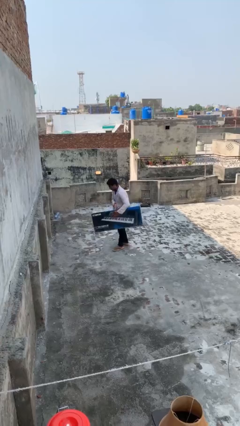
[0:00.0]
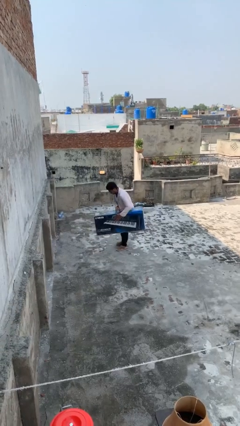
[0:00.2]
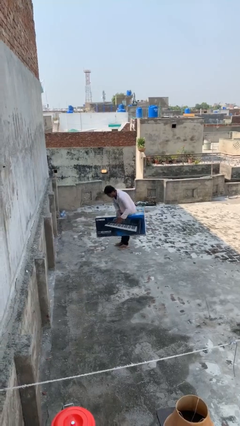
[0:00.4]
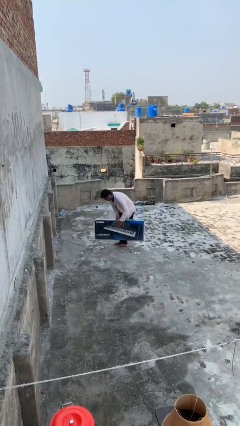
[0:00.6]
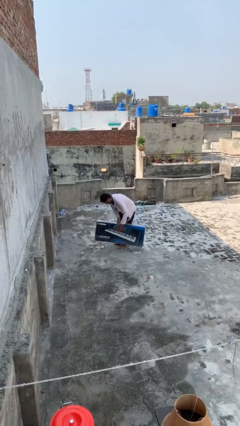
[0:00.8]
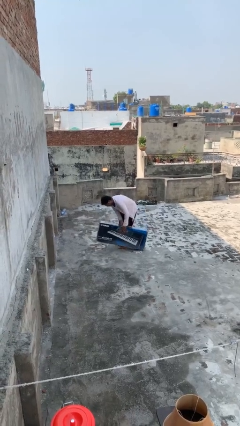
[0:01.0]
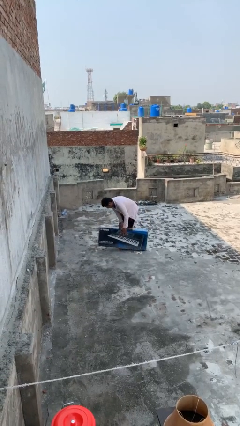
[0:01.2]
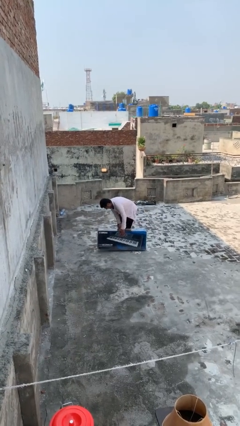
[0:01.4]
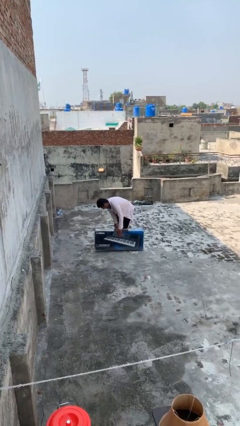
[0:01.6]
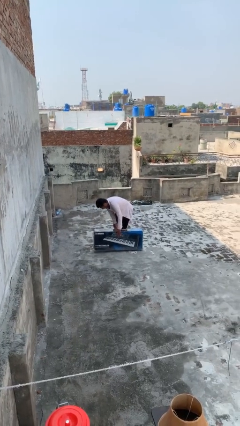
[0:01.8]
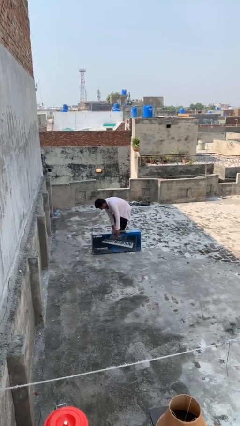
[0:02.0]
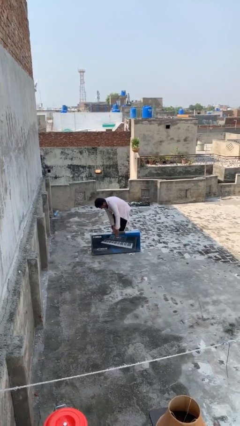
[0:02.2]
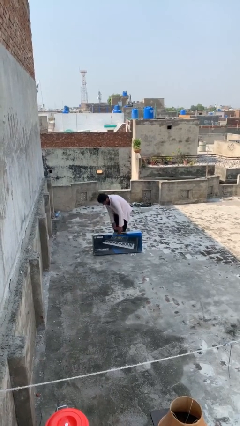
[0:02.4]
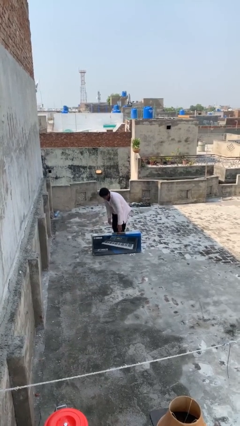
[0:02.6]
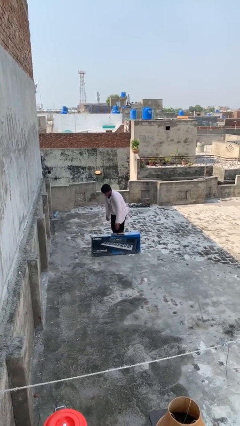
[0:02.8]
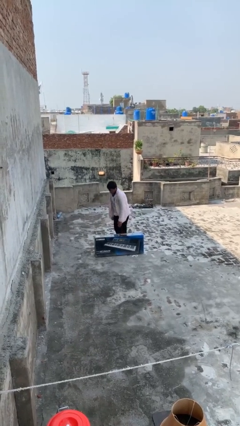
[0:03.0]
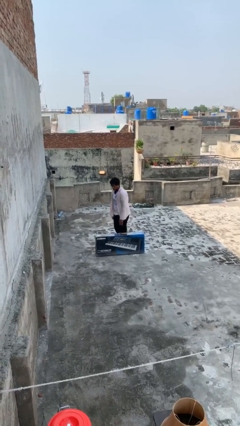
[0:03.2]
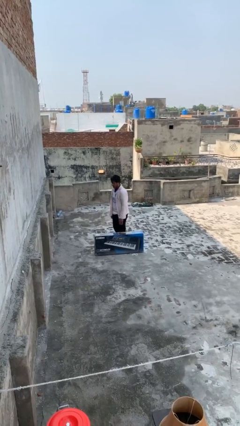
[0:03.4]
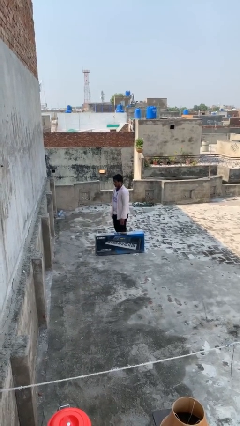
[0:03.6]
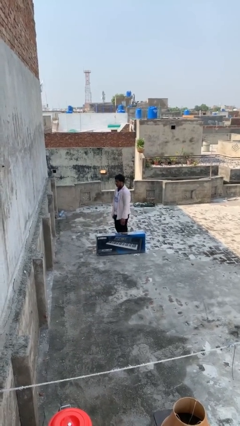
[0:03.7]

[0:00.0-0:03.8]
person puts down object on floor

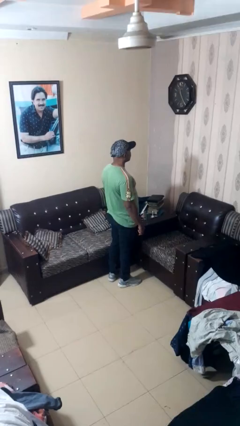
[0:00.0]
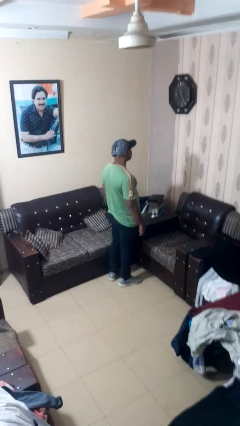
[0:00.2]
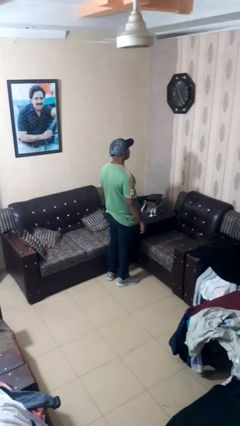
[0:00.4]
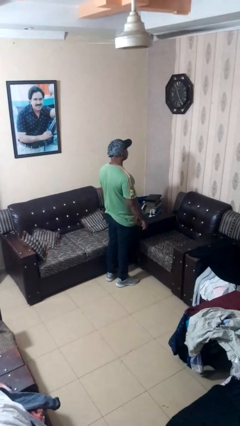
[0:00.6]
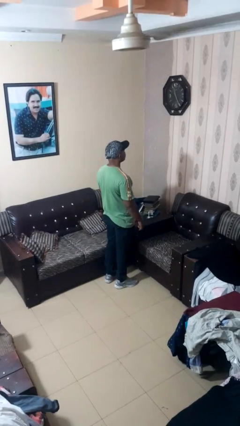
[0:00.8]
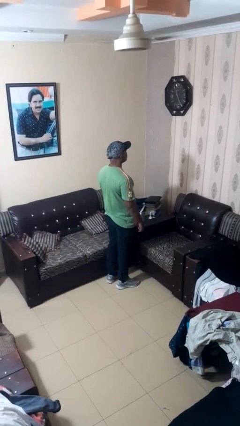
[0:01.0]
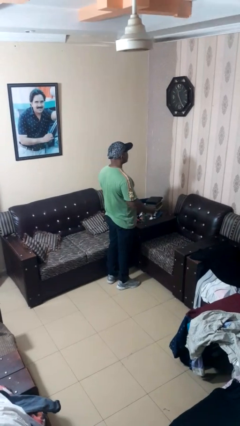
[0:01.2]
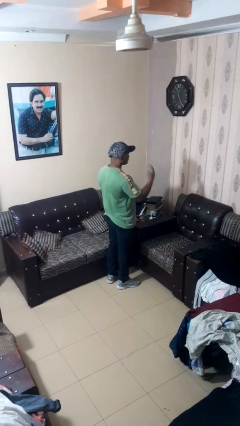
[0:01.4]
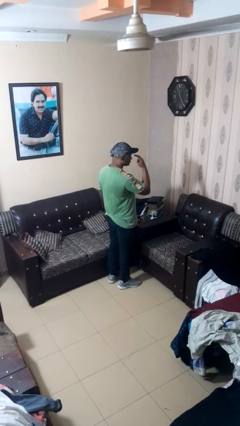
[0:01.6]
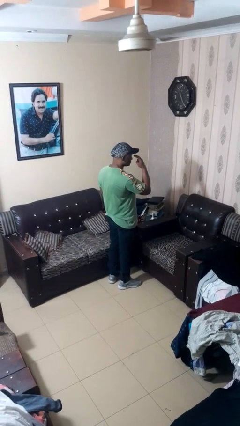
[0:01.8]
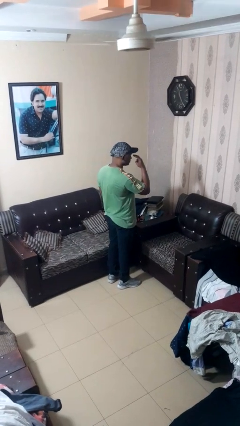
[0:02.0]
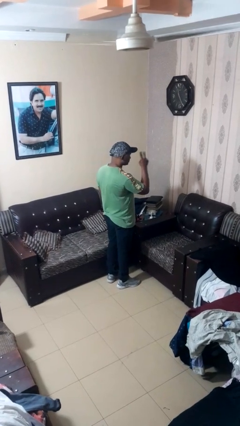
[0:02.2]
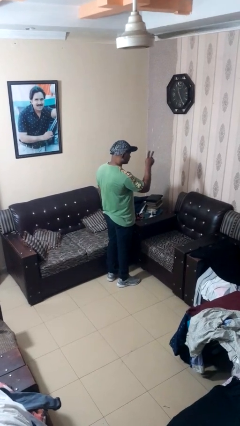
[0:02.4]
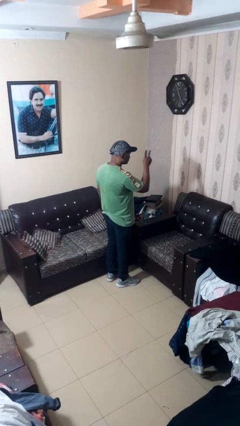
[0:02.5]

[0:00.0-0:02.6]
person gestures watch closely

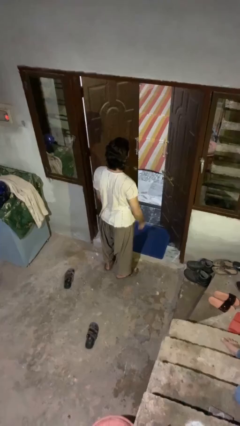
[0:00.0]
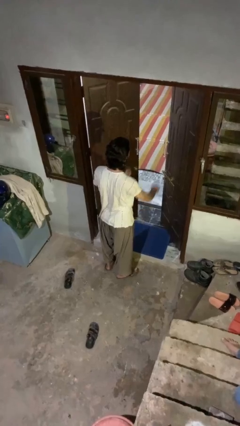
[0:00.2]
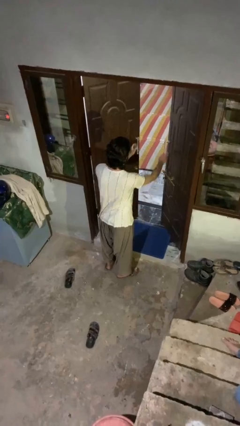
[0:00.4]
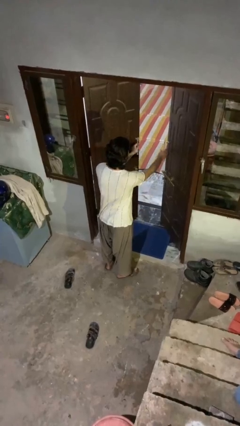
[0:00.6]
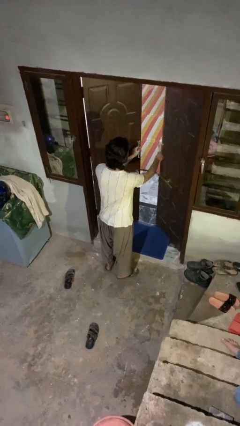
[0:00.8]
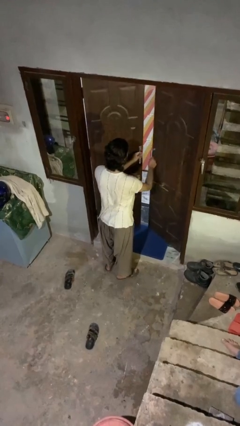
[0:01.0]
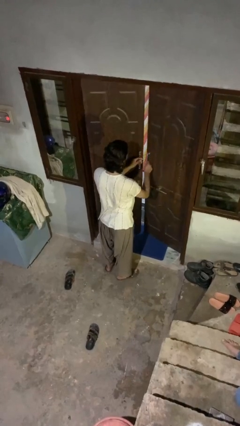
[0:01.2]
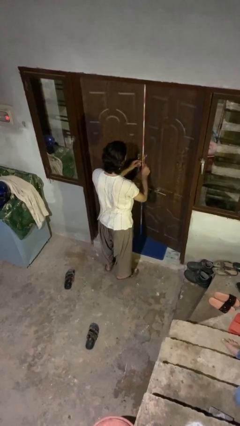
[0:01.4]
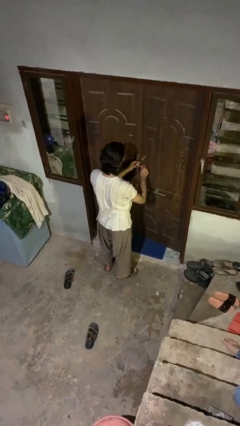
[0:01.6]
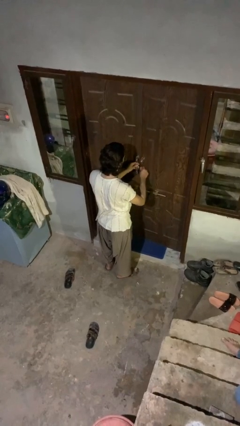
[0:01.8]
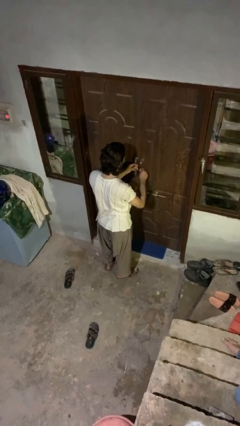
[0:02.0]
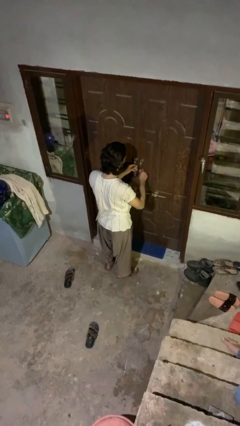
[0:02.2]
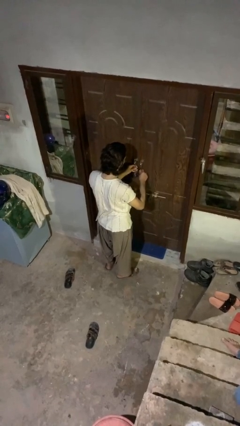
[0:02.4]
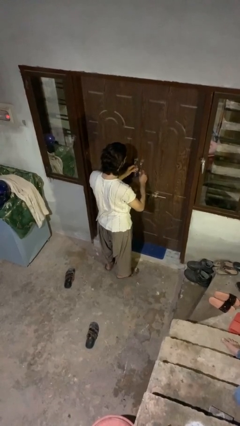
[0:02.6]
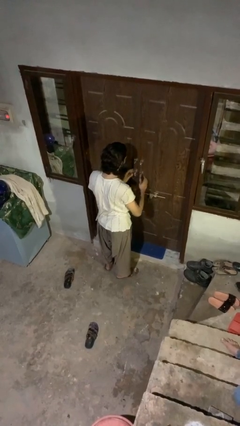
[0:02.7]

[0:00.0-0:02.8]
person closes facility door

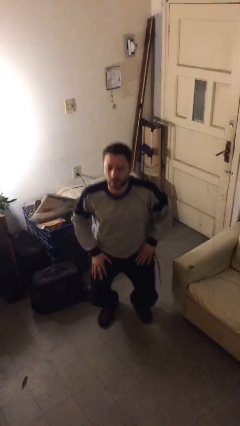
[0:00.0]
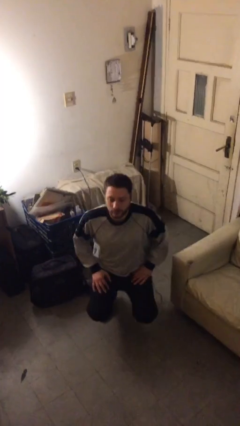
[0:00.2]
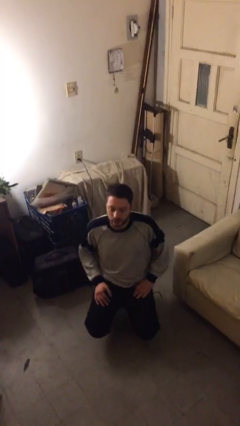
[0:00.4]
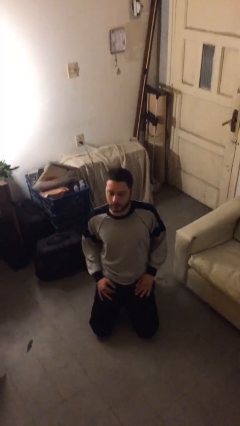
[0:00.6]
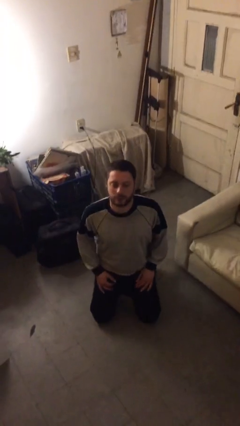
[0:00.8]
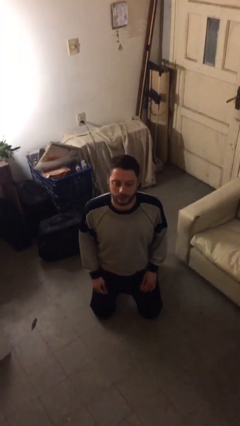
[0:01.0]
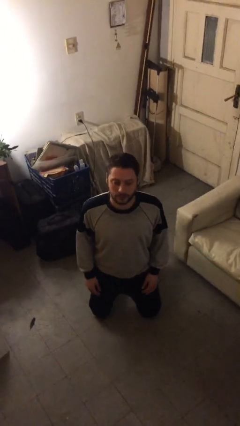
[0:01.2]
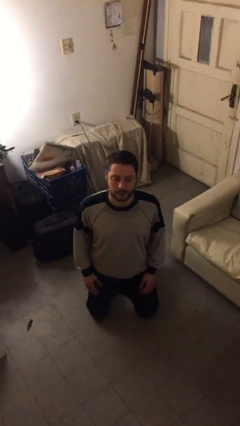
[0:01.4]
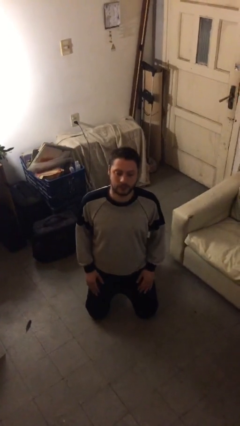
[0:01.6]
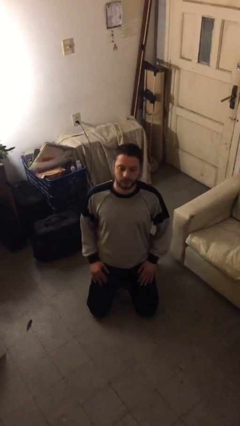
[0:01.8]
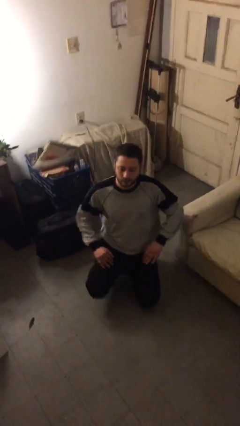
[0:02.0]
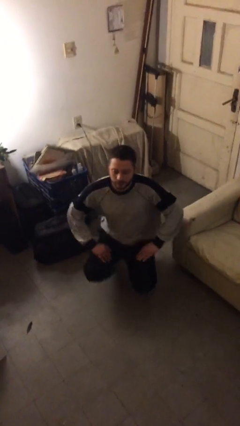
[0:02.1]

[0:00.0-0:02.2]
person kneels

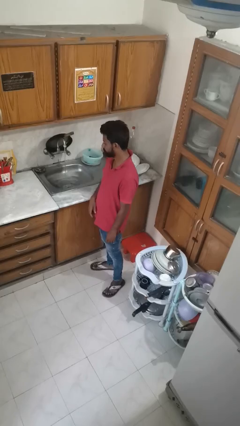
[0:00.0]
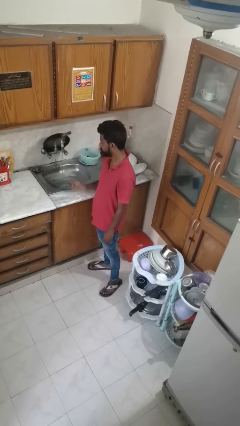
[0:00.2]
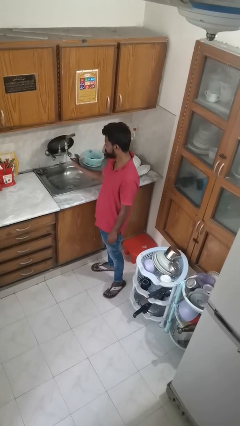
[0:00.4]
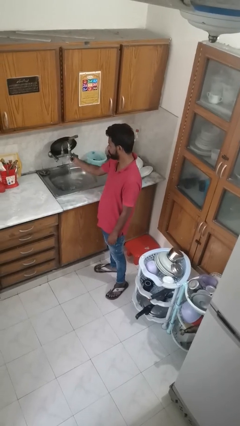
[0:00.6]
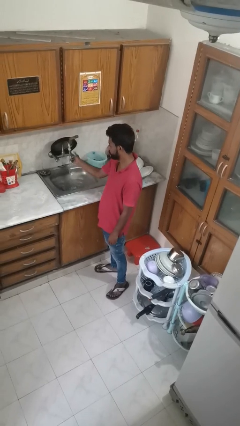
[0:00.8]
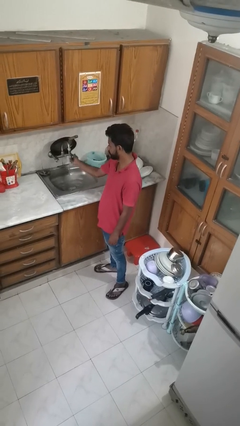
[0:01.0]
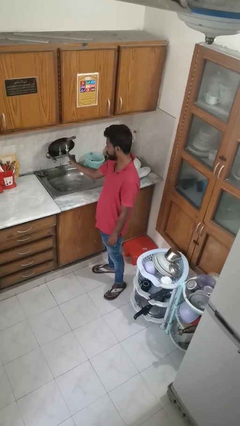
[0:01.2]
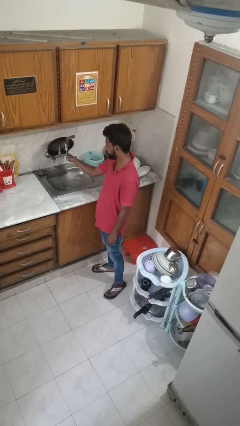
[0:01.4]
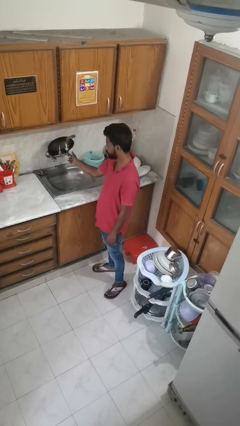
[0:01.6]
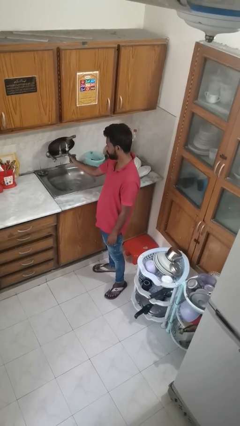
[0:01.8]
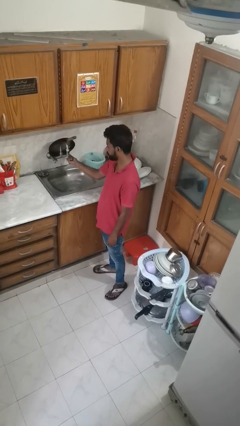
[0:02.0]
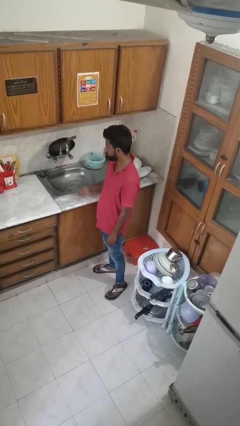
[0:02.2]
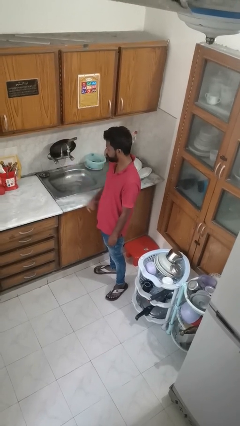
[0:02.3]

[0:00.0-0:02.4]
person turns off faucet

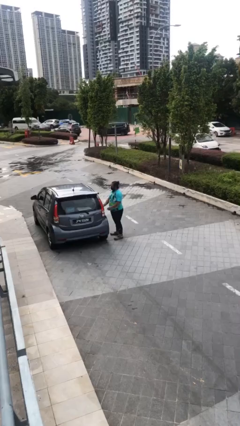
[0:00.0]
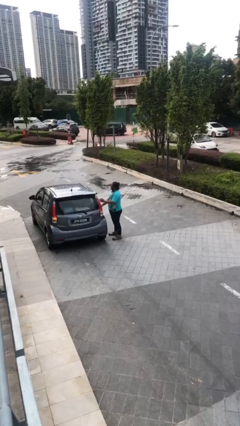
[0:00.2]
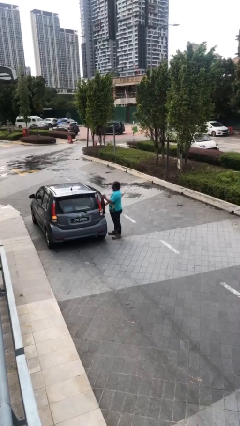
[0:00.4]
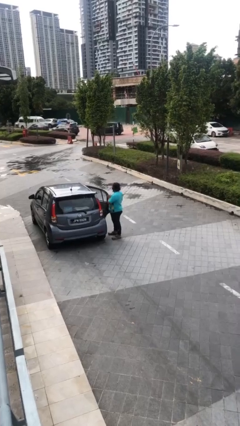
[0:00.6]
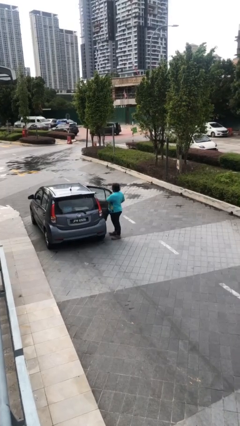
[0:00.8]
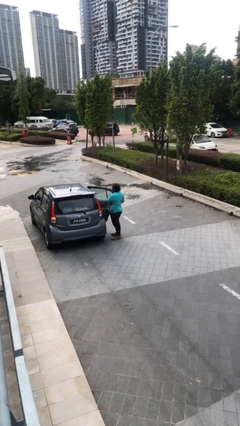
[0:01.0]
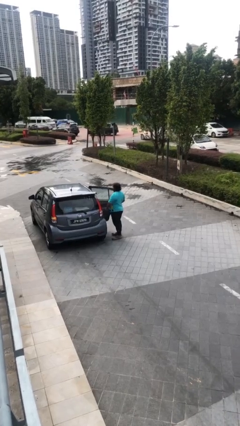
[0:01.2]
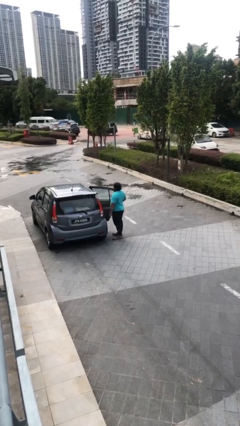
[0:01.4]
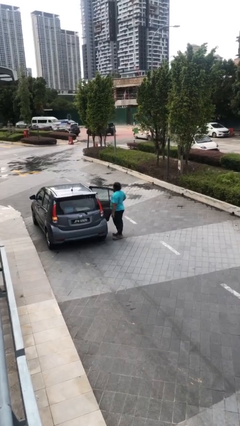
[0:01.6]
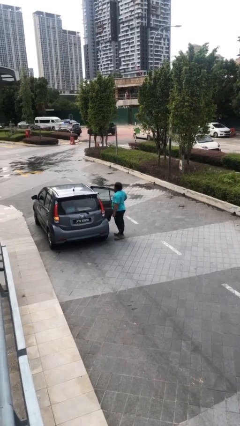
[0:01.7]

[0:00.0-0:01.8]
person opens car door

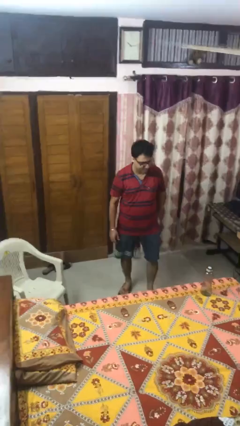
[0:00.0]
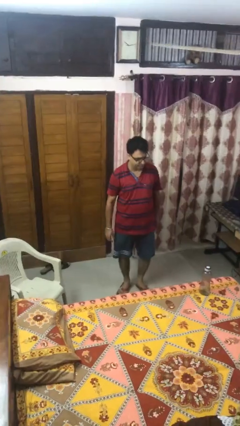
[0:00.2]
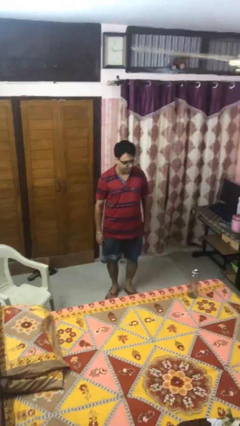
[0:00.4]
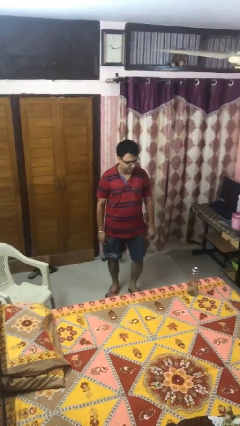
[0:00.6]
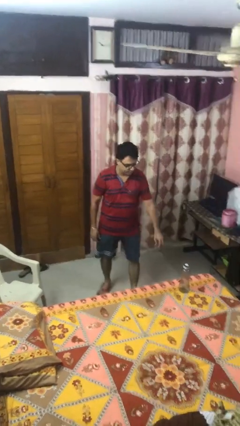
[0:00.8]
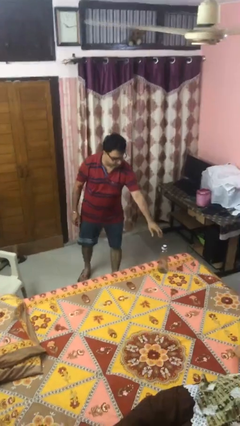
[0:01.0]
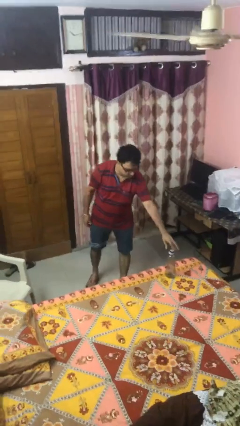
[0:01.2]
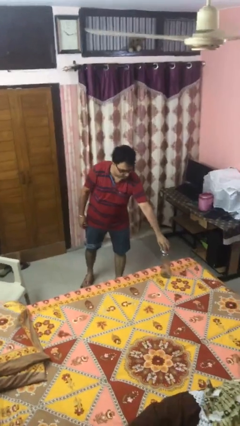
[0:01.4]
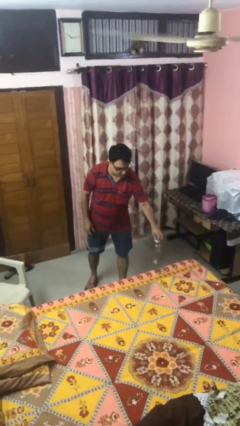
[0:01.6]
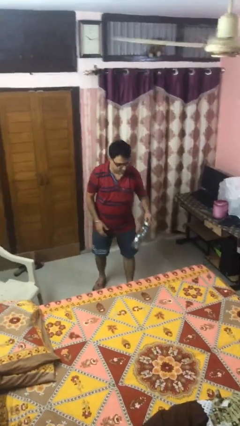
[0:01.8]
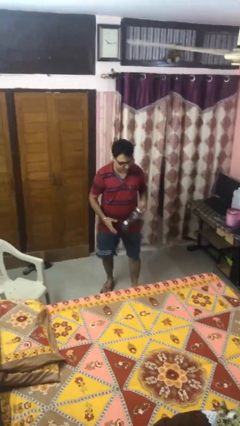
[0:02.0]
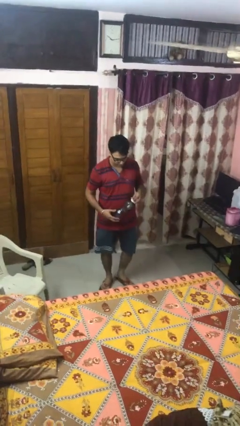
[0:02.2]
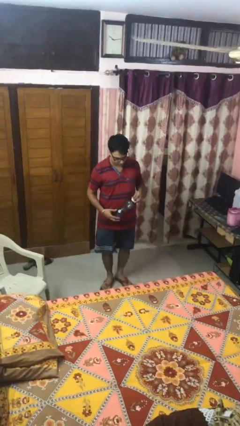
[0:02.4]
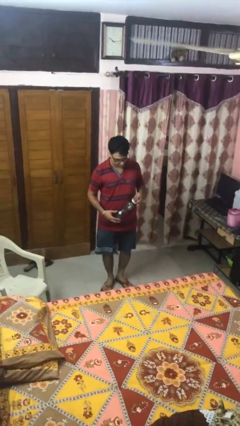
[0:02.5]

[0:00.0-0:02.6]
person picks up object from bed
